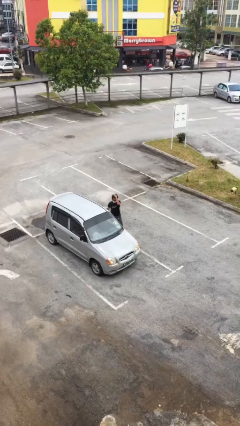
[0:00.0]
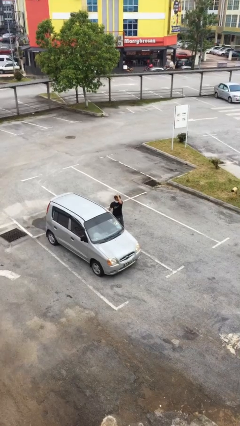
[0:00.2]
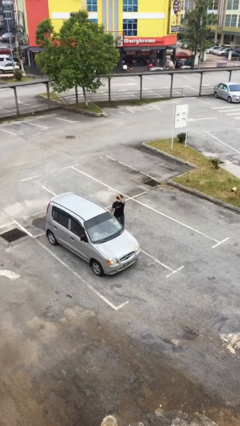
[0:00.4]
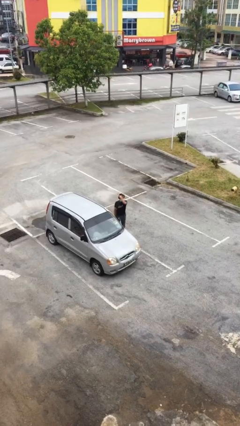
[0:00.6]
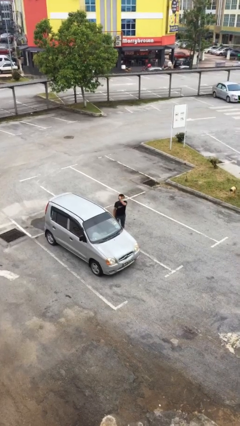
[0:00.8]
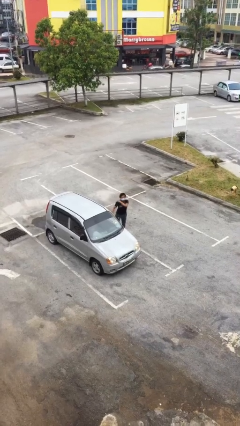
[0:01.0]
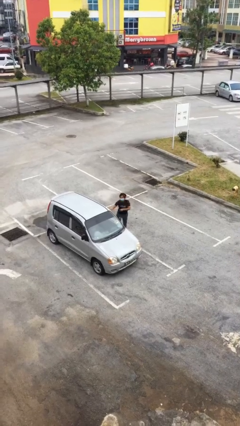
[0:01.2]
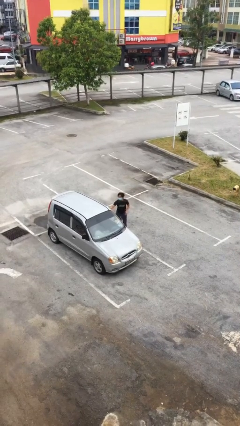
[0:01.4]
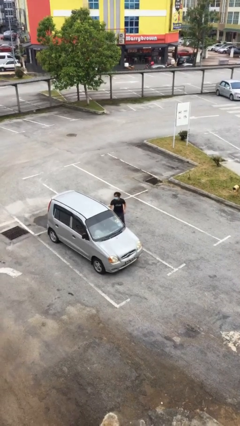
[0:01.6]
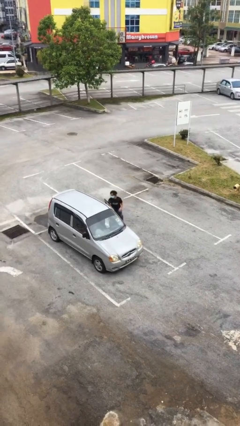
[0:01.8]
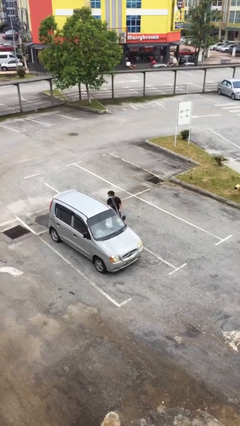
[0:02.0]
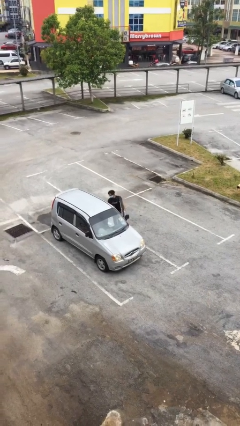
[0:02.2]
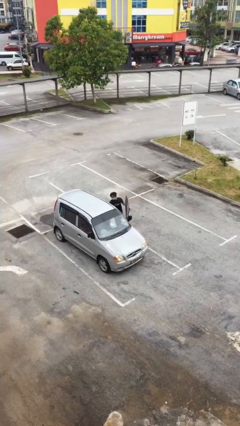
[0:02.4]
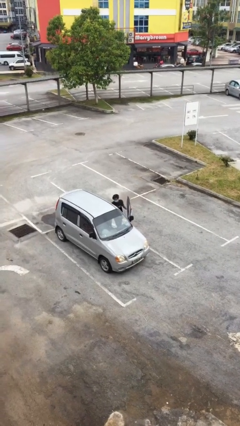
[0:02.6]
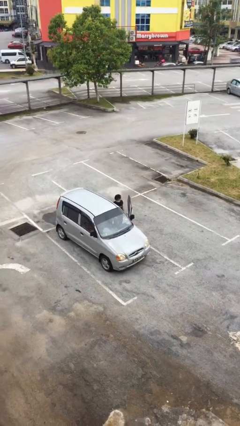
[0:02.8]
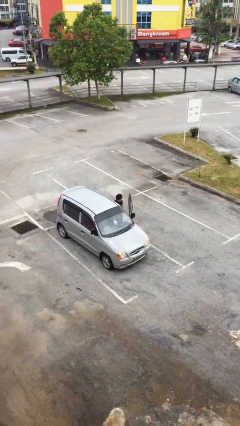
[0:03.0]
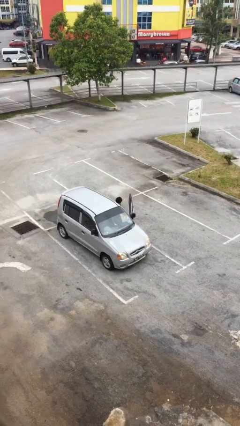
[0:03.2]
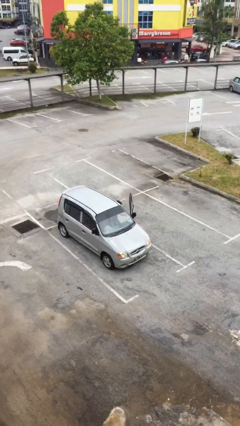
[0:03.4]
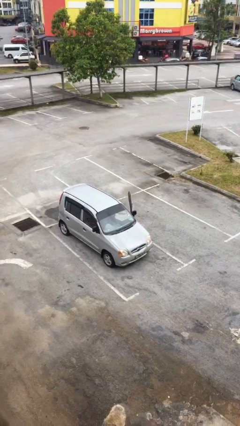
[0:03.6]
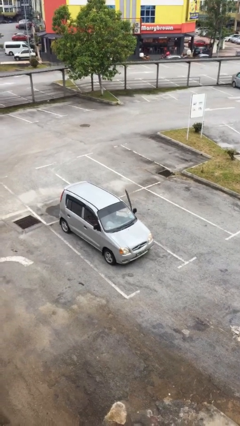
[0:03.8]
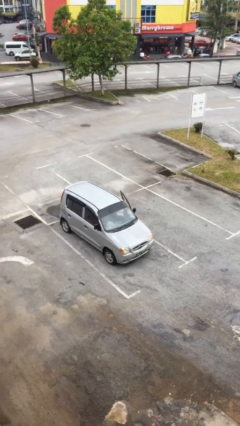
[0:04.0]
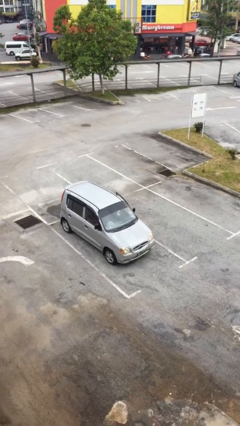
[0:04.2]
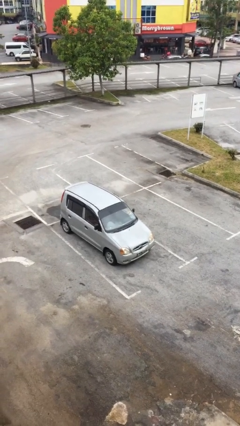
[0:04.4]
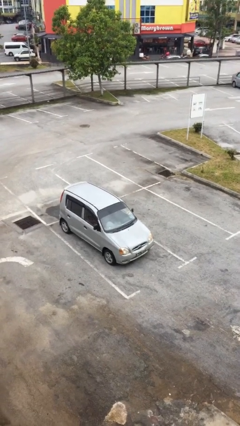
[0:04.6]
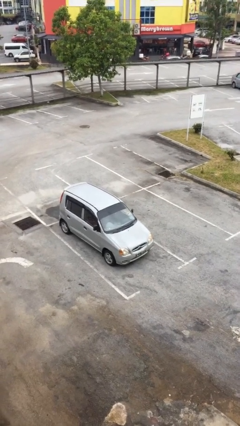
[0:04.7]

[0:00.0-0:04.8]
person enters car

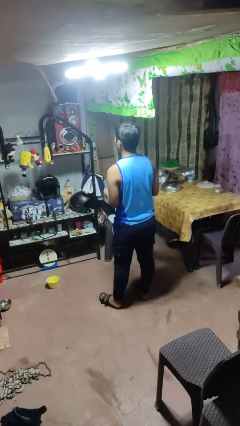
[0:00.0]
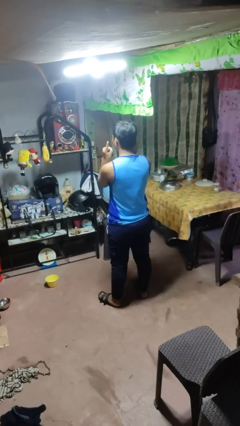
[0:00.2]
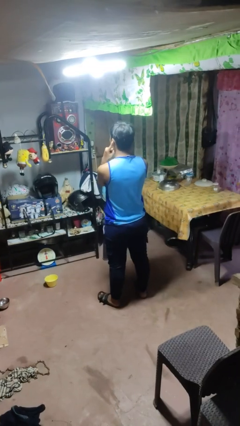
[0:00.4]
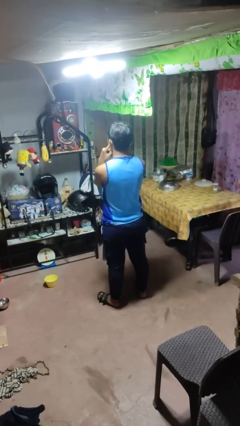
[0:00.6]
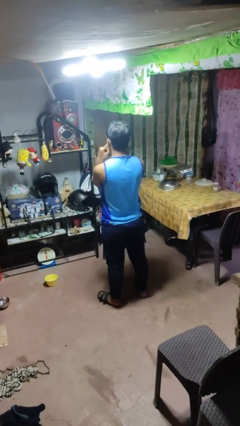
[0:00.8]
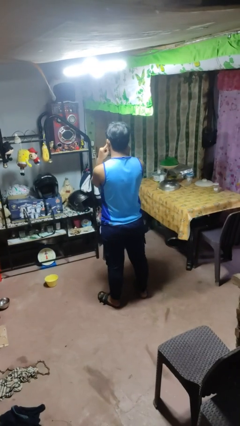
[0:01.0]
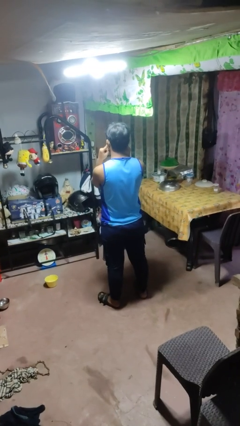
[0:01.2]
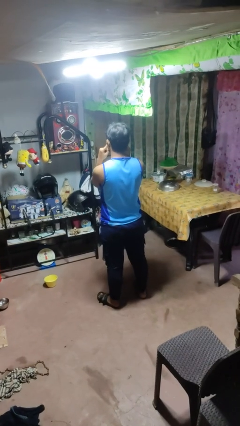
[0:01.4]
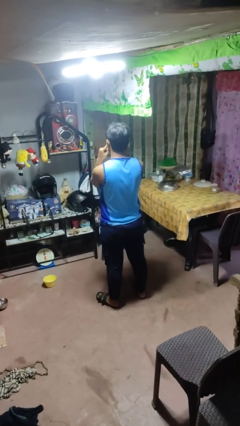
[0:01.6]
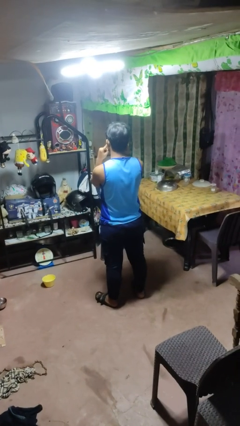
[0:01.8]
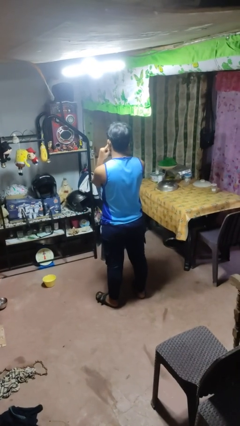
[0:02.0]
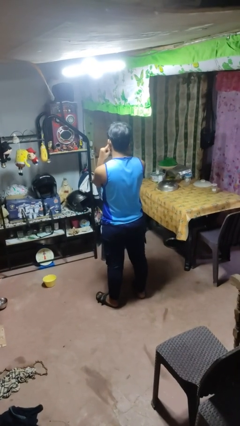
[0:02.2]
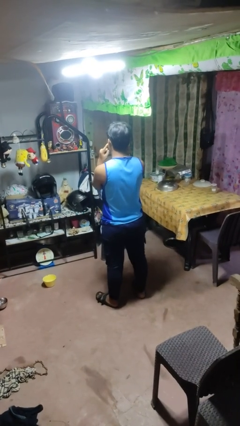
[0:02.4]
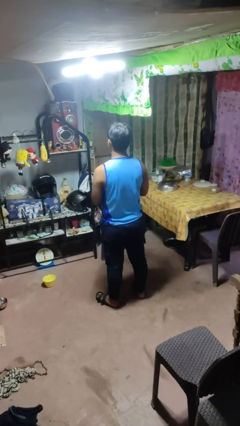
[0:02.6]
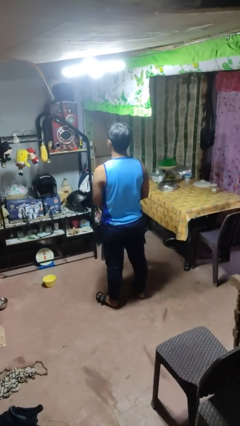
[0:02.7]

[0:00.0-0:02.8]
person puts fingers in ear

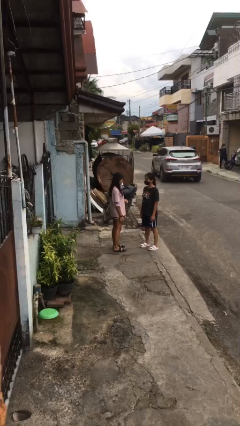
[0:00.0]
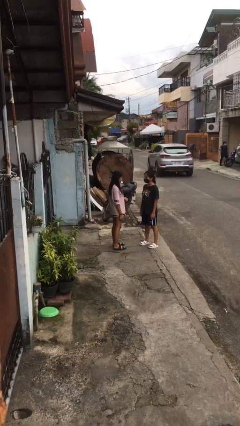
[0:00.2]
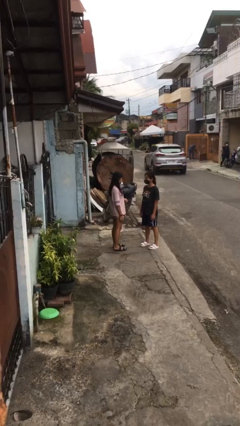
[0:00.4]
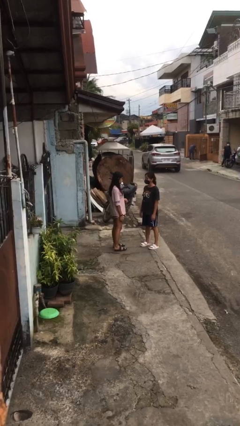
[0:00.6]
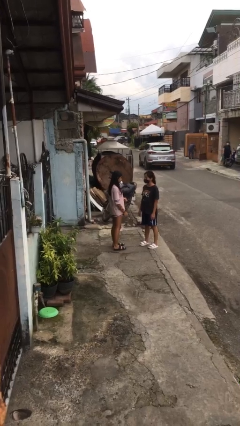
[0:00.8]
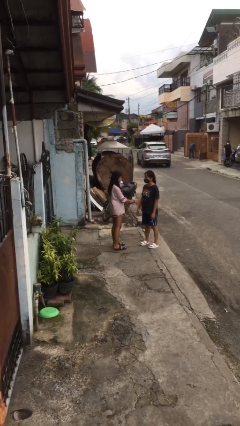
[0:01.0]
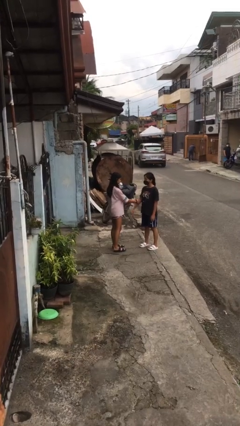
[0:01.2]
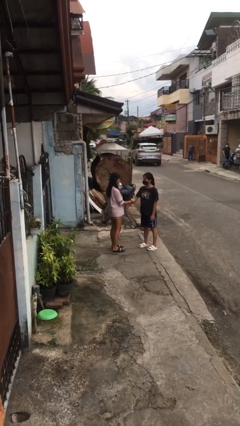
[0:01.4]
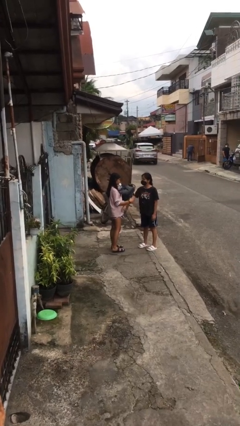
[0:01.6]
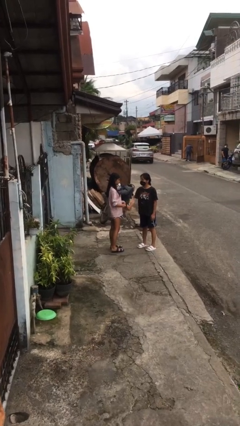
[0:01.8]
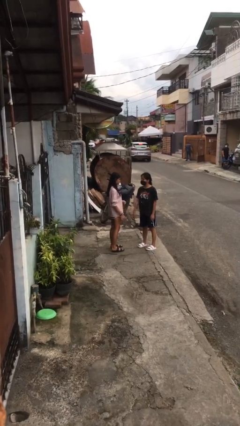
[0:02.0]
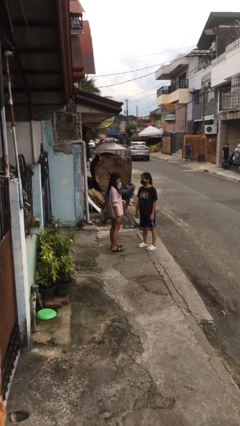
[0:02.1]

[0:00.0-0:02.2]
person grabs person by forearm

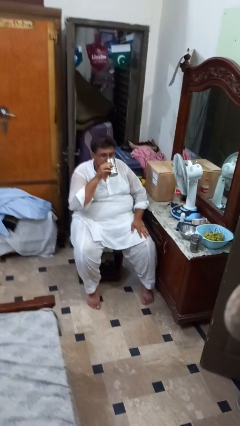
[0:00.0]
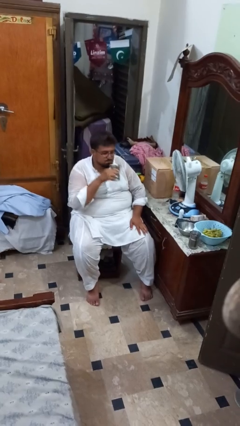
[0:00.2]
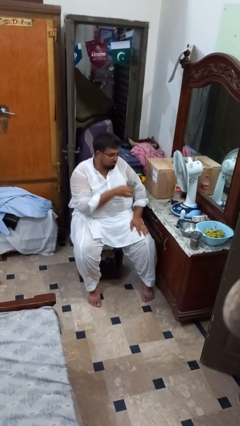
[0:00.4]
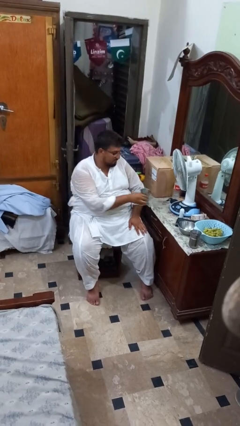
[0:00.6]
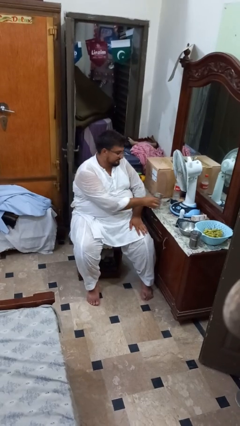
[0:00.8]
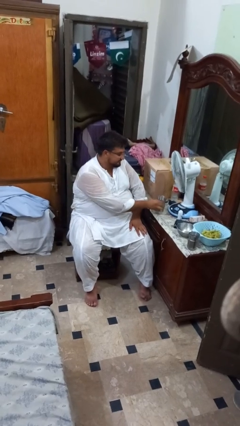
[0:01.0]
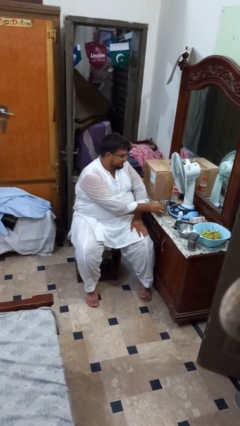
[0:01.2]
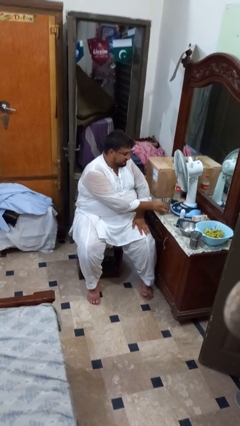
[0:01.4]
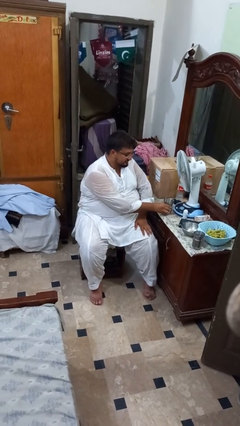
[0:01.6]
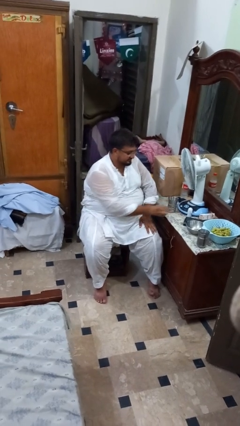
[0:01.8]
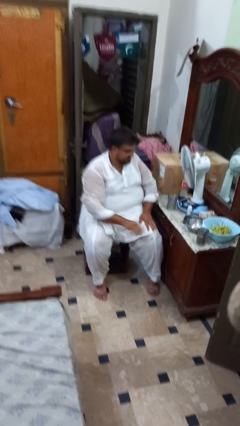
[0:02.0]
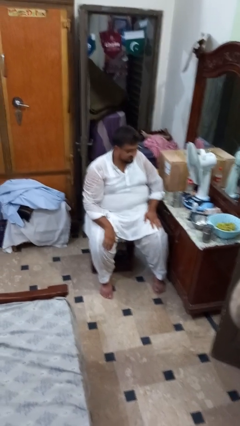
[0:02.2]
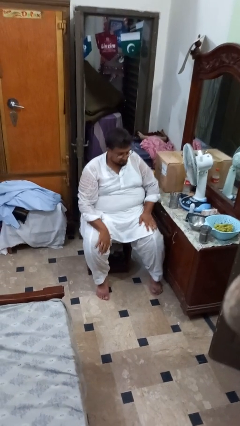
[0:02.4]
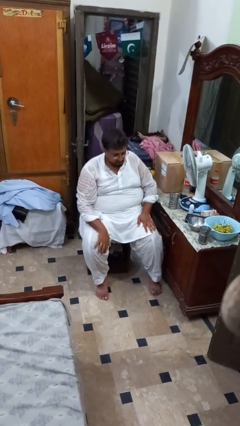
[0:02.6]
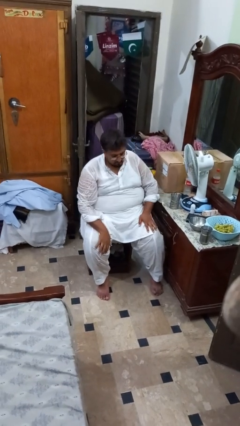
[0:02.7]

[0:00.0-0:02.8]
person puts down object on table

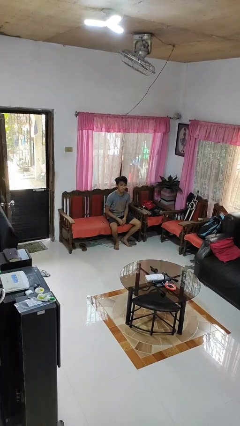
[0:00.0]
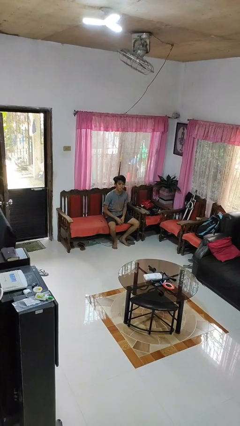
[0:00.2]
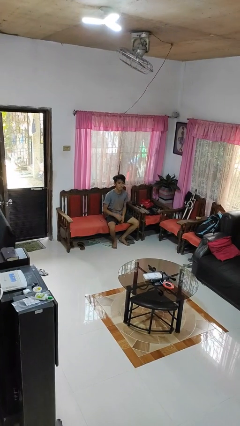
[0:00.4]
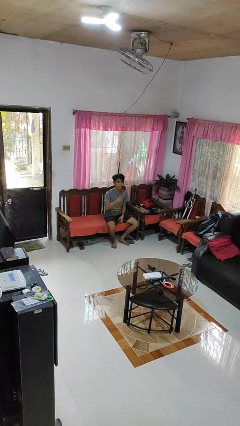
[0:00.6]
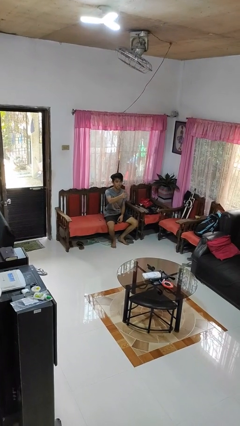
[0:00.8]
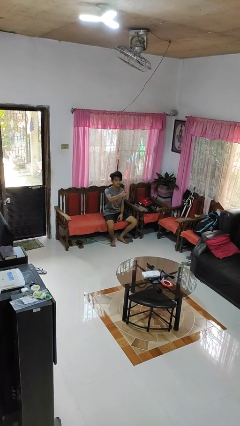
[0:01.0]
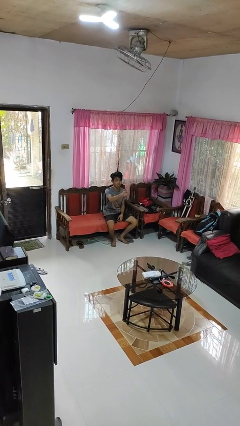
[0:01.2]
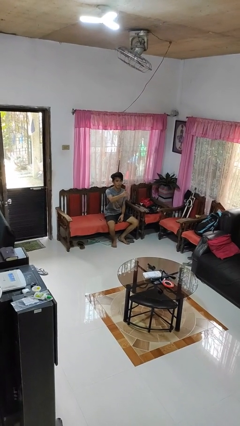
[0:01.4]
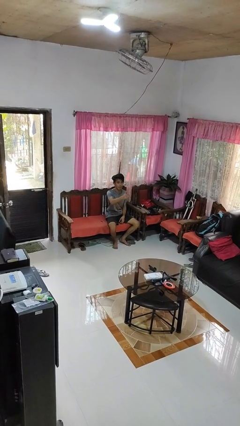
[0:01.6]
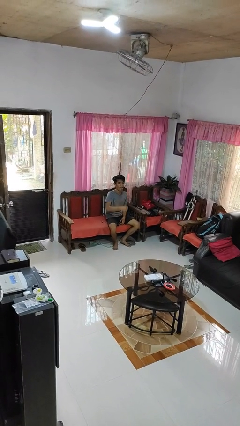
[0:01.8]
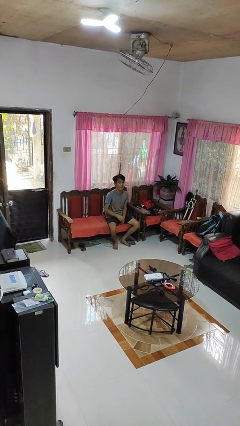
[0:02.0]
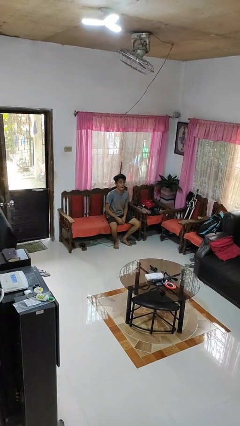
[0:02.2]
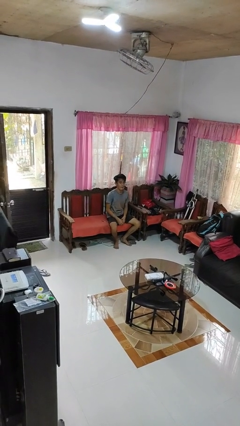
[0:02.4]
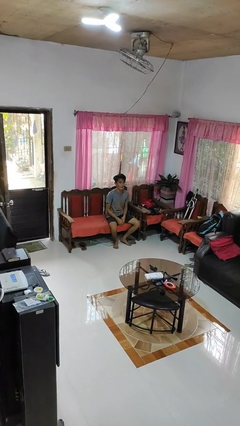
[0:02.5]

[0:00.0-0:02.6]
person gestures thumbs up

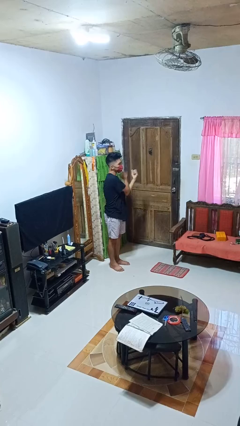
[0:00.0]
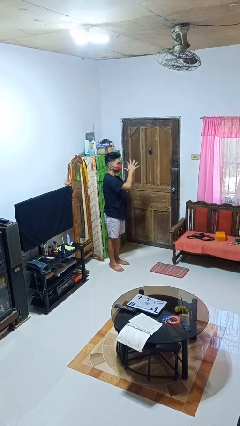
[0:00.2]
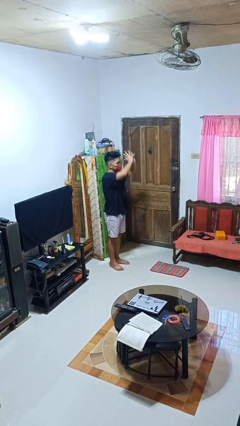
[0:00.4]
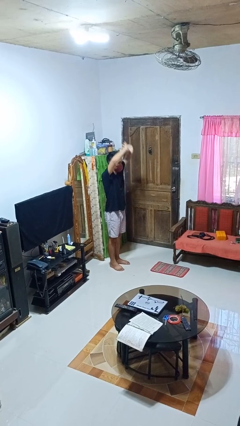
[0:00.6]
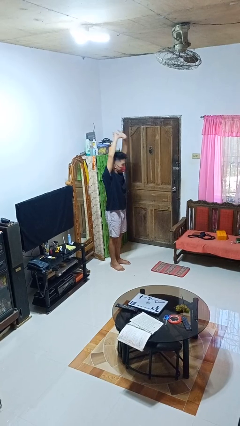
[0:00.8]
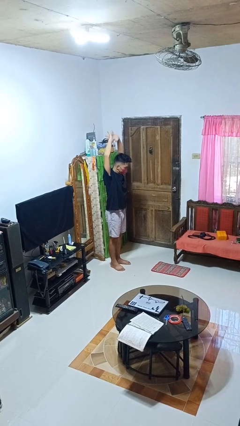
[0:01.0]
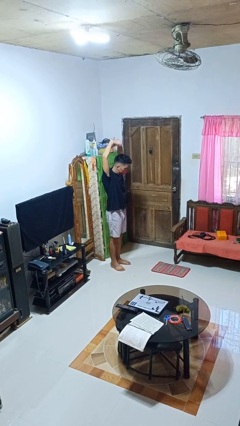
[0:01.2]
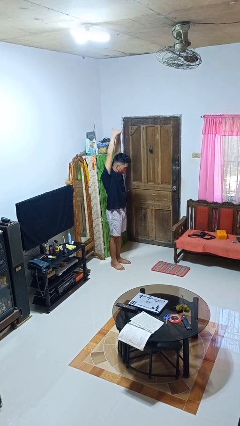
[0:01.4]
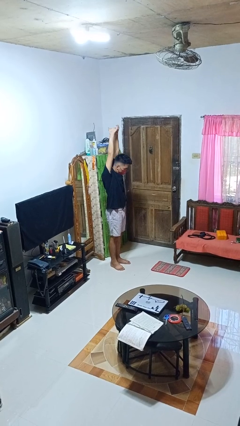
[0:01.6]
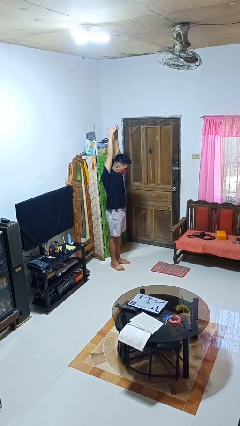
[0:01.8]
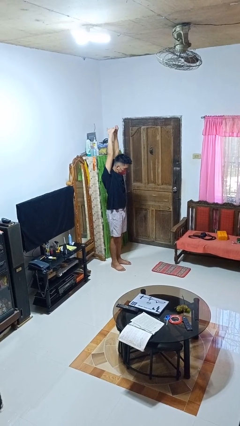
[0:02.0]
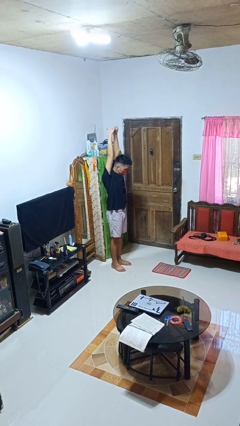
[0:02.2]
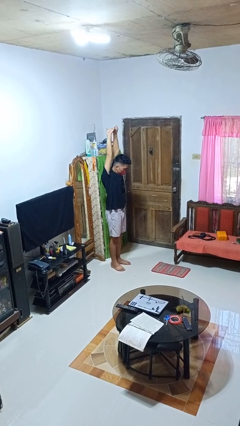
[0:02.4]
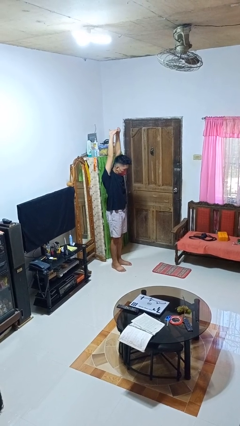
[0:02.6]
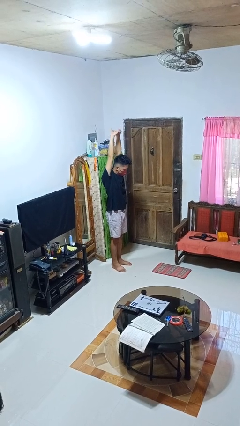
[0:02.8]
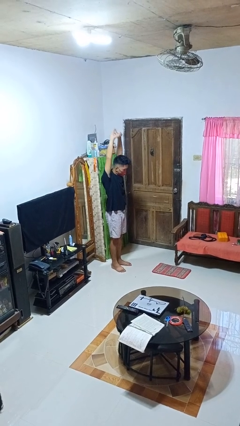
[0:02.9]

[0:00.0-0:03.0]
person stretches arms over head
